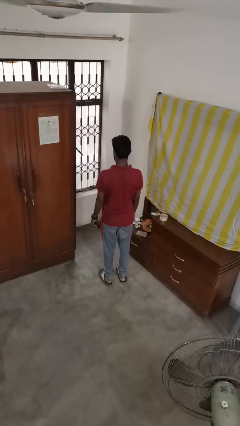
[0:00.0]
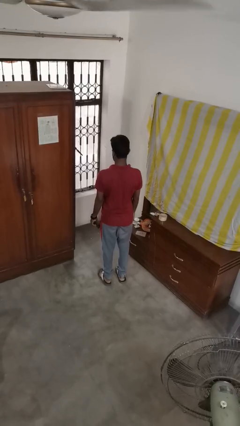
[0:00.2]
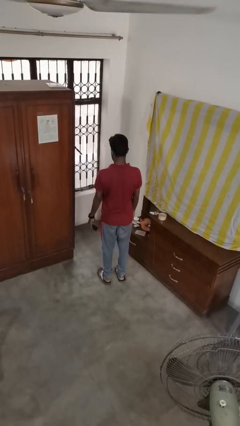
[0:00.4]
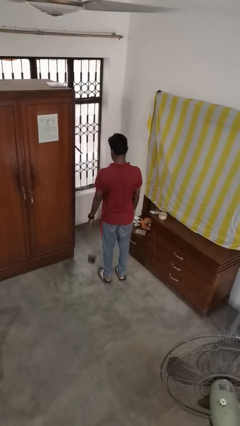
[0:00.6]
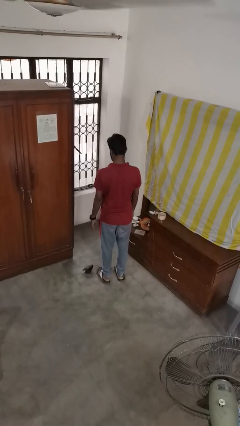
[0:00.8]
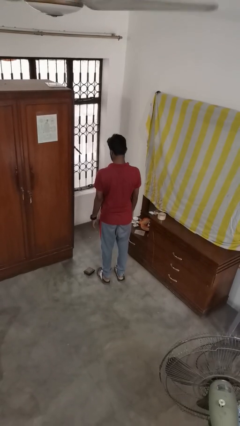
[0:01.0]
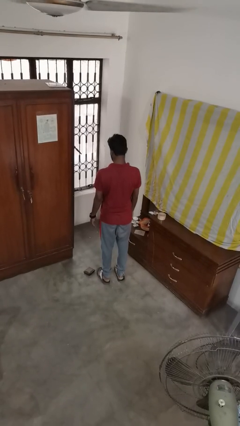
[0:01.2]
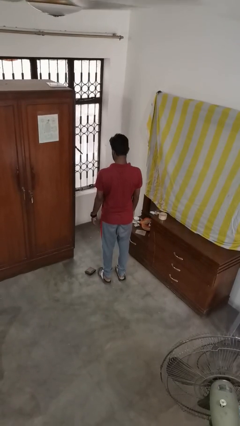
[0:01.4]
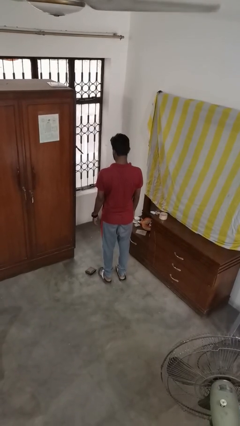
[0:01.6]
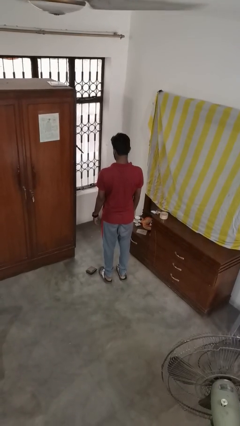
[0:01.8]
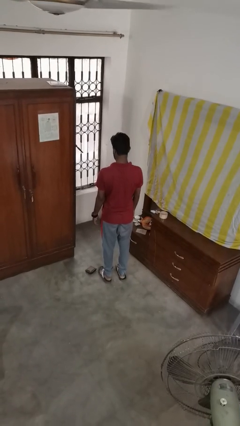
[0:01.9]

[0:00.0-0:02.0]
person throws object to ground

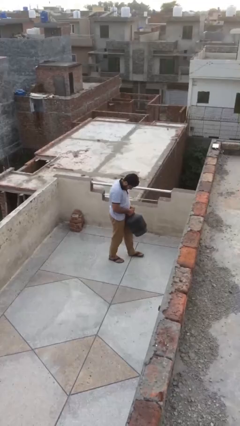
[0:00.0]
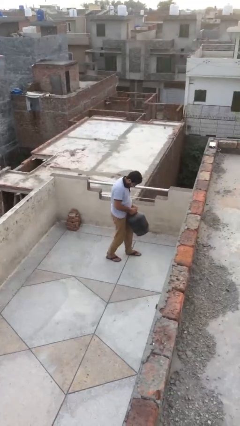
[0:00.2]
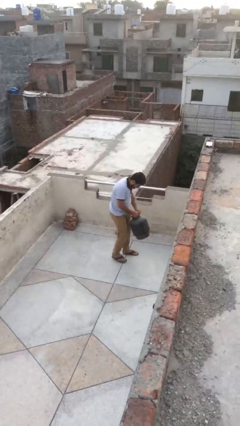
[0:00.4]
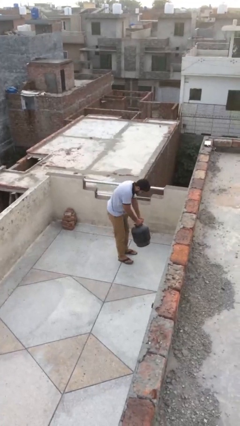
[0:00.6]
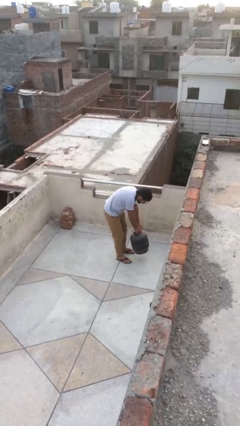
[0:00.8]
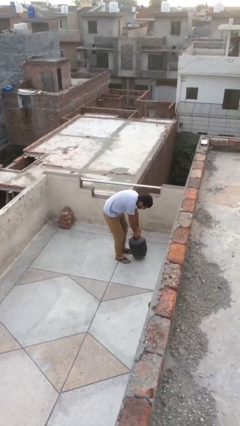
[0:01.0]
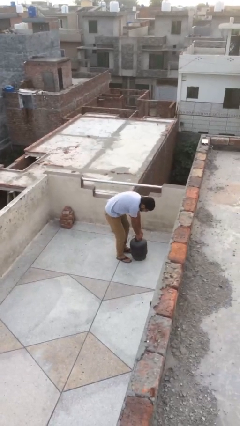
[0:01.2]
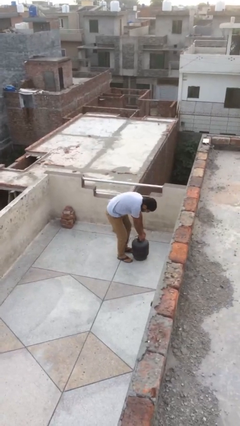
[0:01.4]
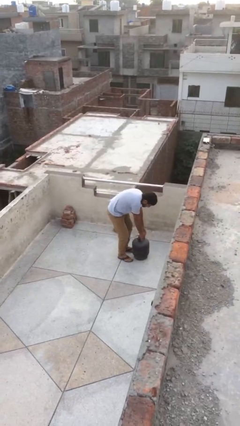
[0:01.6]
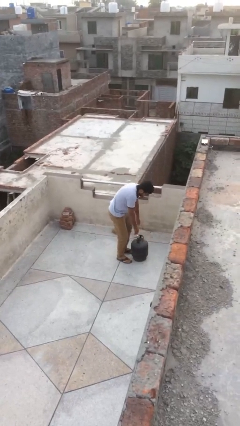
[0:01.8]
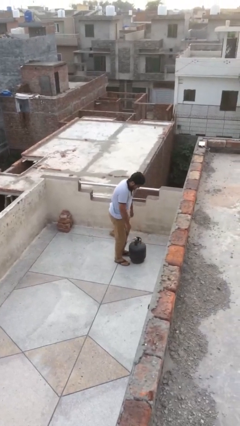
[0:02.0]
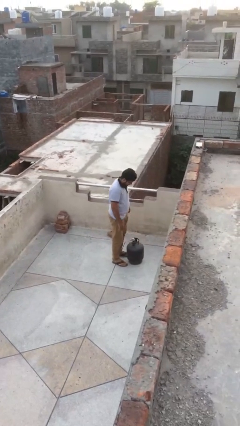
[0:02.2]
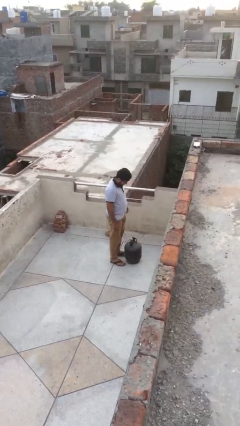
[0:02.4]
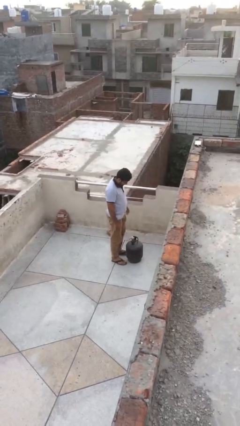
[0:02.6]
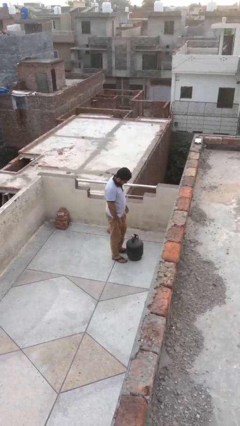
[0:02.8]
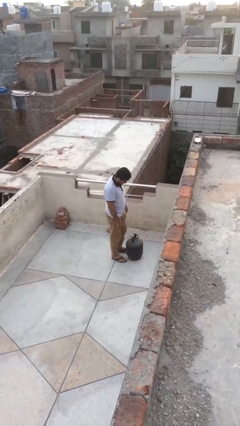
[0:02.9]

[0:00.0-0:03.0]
person puts down object on floor

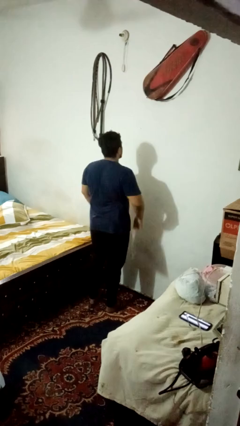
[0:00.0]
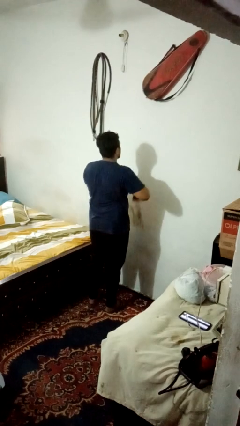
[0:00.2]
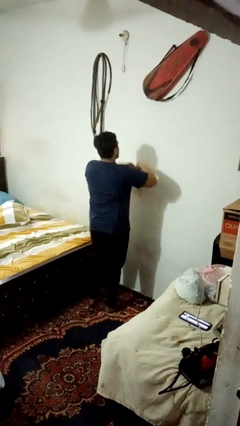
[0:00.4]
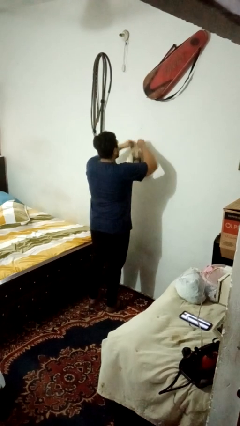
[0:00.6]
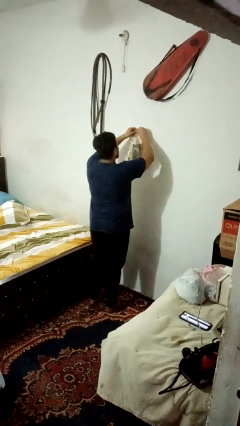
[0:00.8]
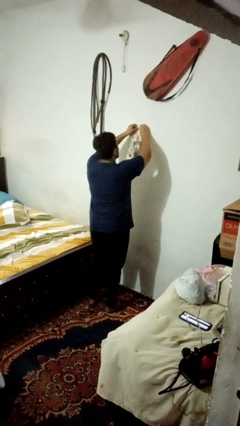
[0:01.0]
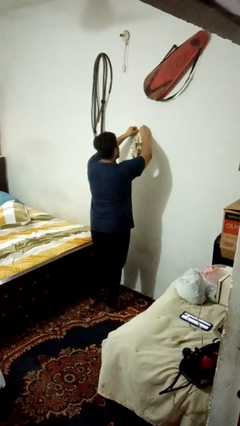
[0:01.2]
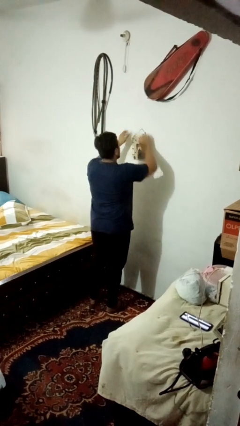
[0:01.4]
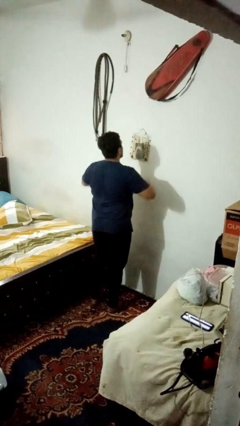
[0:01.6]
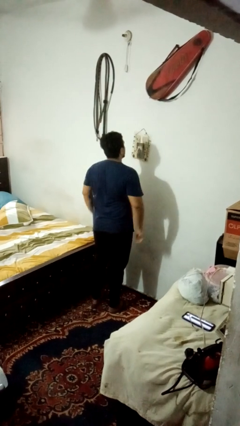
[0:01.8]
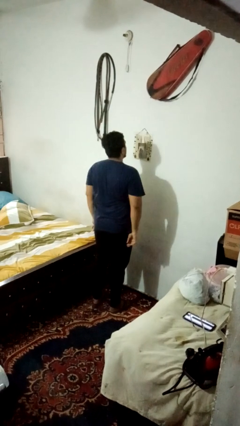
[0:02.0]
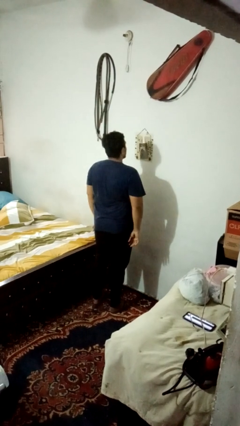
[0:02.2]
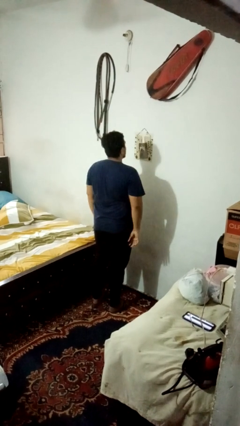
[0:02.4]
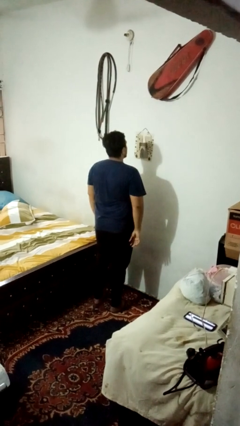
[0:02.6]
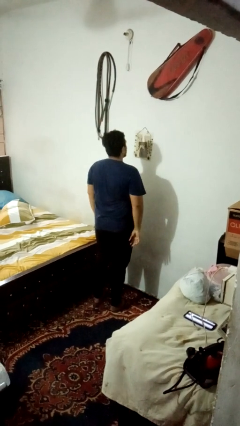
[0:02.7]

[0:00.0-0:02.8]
person puts up picture frame

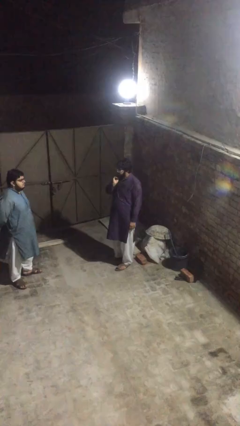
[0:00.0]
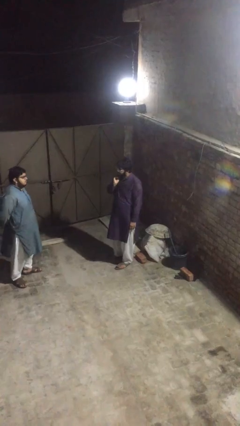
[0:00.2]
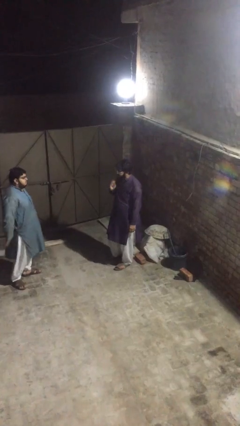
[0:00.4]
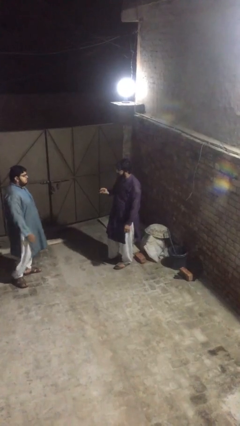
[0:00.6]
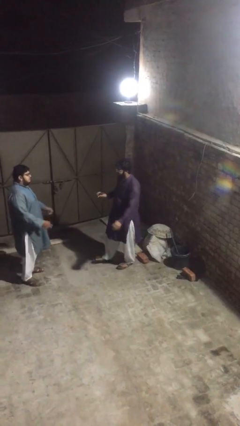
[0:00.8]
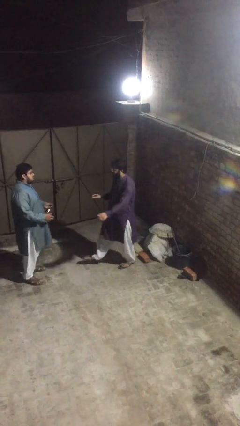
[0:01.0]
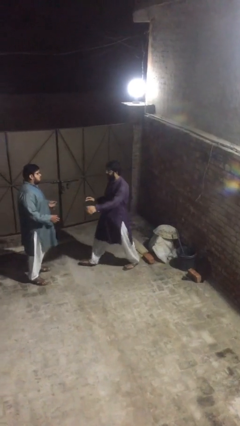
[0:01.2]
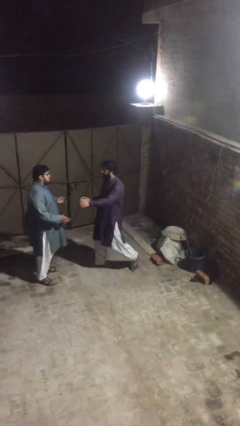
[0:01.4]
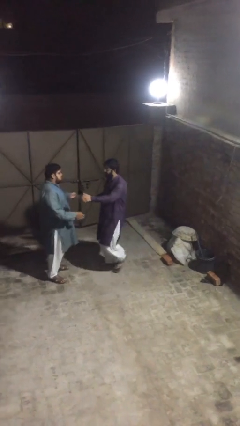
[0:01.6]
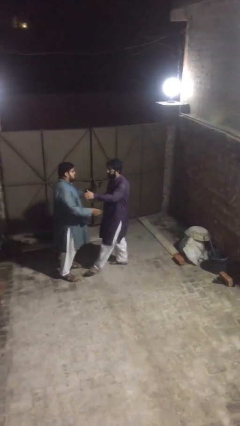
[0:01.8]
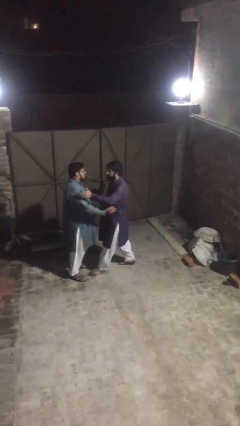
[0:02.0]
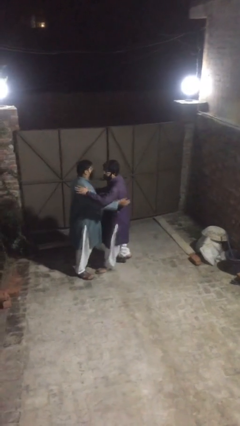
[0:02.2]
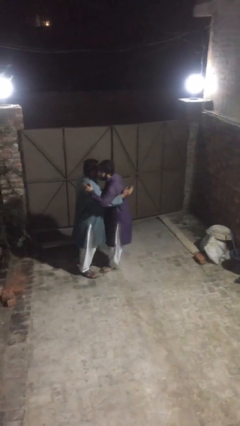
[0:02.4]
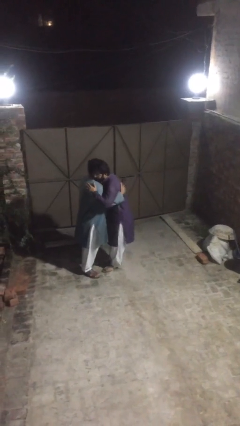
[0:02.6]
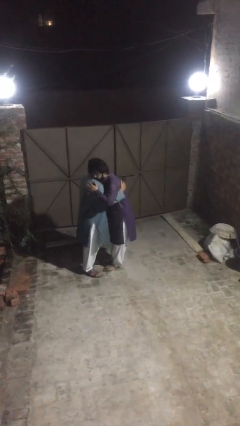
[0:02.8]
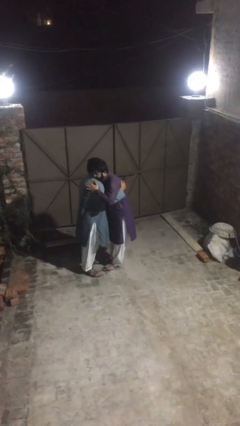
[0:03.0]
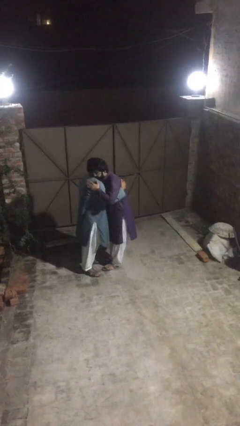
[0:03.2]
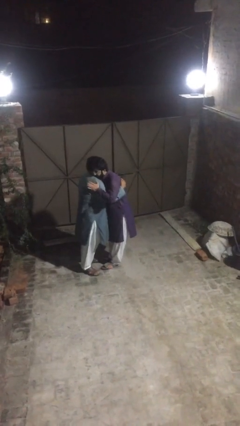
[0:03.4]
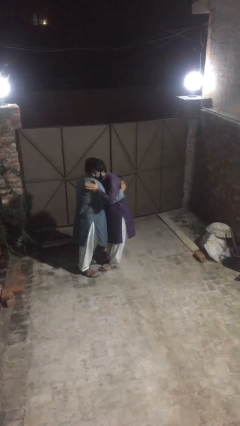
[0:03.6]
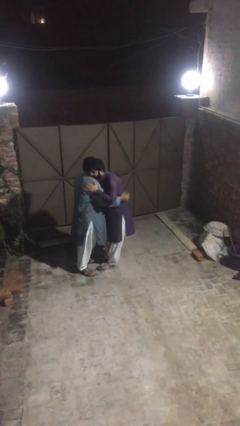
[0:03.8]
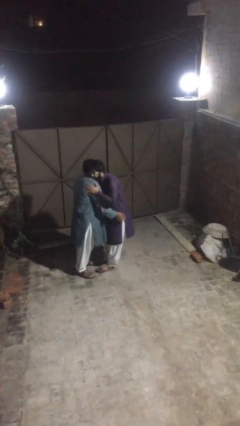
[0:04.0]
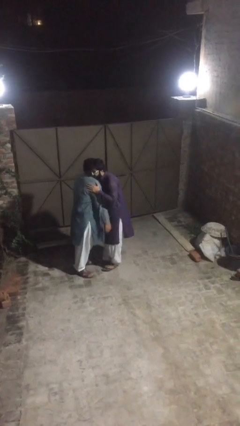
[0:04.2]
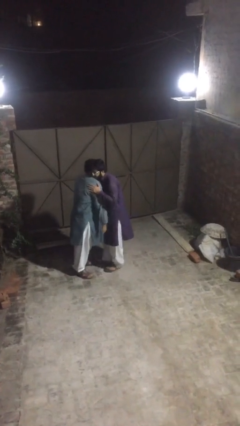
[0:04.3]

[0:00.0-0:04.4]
person embraces person

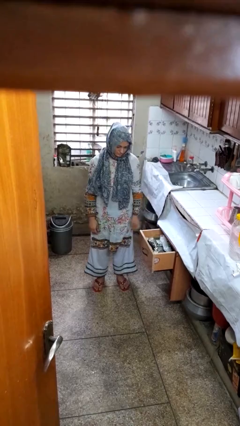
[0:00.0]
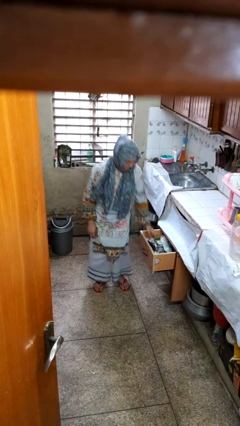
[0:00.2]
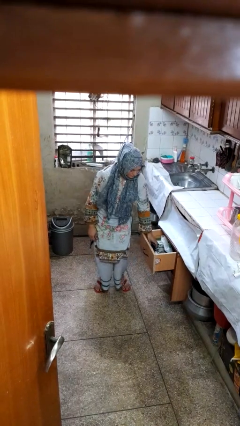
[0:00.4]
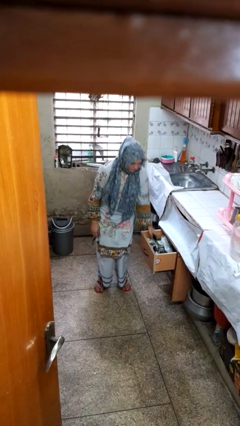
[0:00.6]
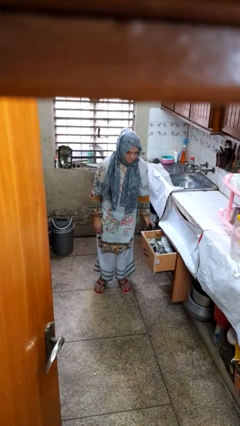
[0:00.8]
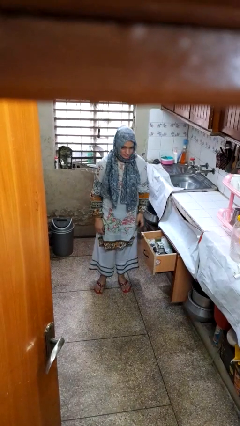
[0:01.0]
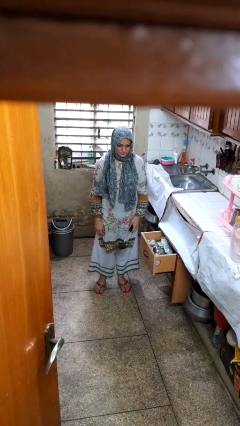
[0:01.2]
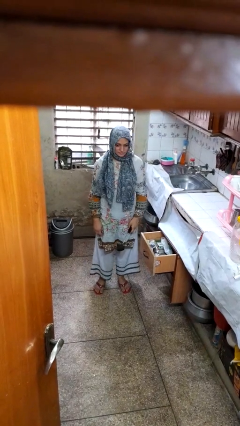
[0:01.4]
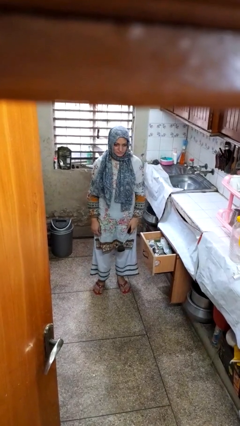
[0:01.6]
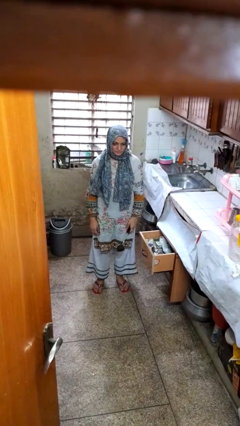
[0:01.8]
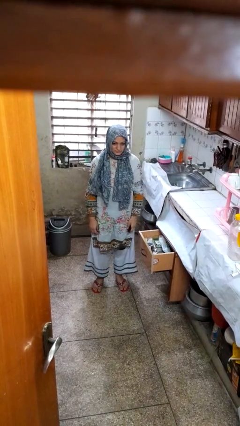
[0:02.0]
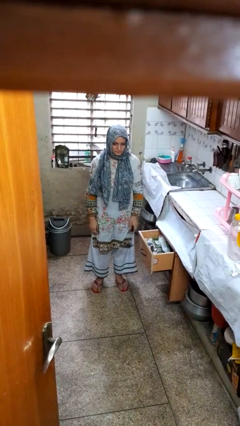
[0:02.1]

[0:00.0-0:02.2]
person takes object from kitchen drawer

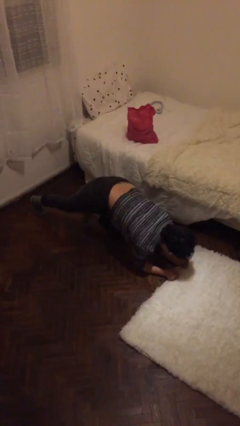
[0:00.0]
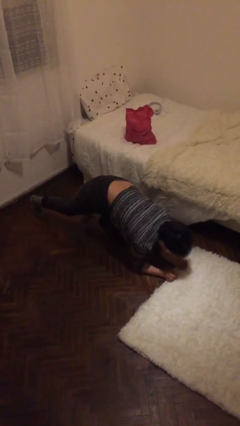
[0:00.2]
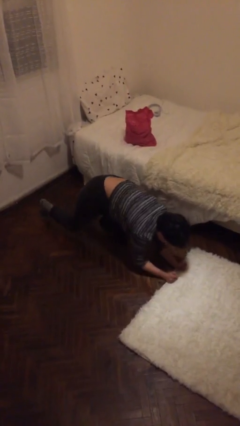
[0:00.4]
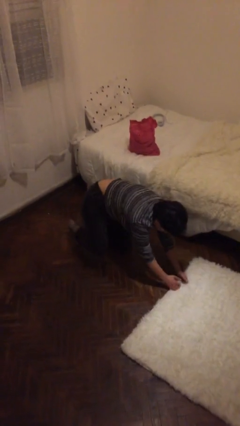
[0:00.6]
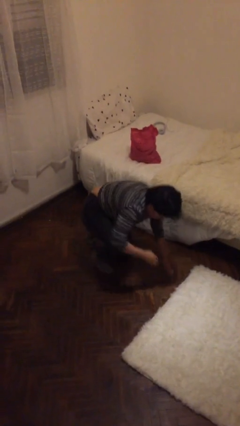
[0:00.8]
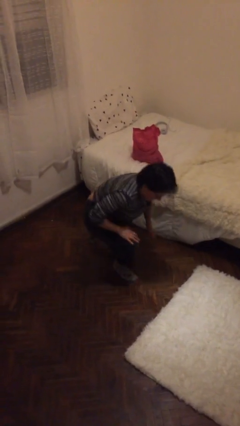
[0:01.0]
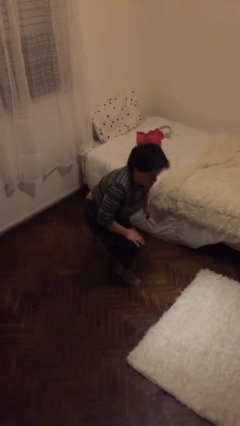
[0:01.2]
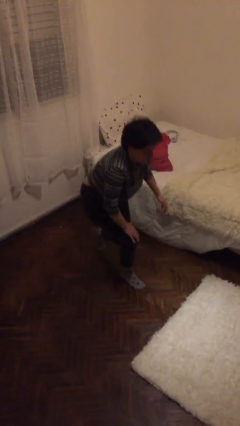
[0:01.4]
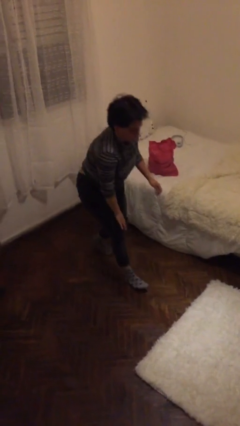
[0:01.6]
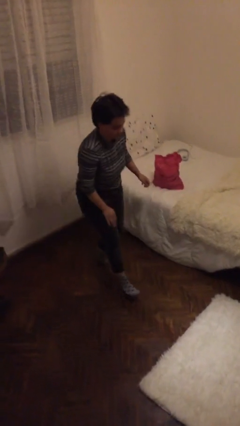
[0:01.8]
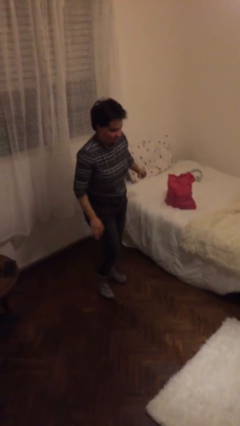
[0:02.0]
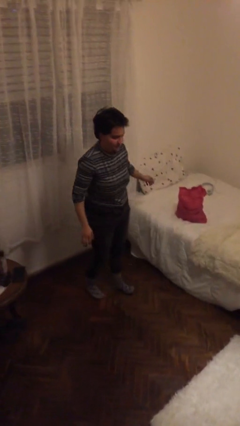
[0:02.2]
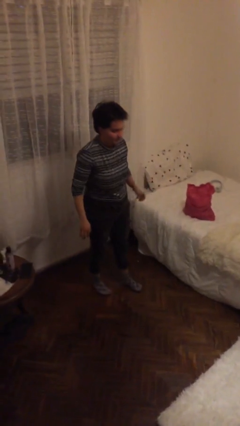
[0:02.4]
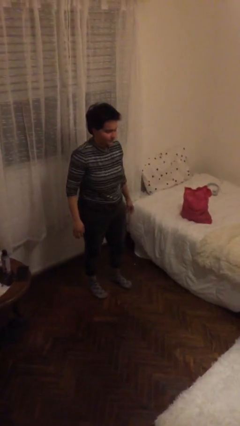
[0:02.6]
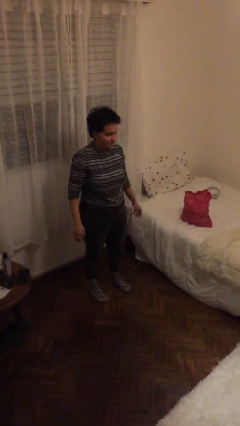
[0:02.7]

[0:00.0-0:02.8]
person stands up from floor
